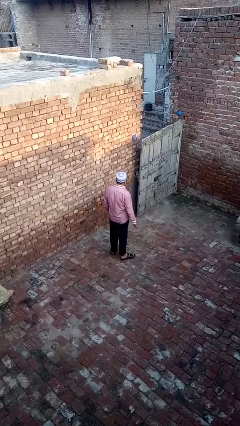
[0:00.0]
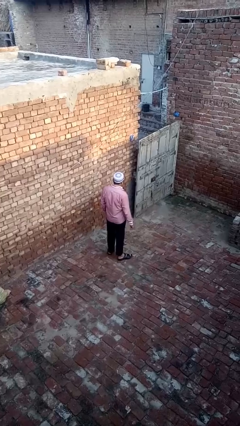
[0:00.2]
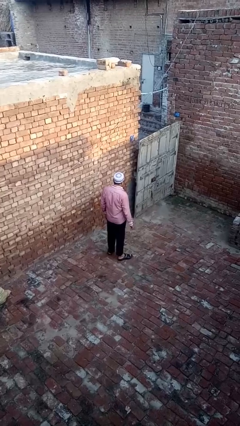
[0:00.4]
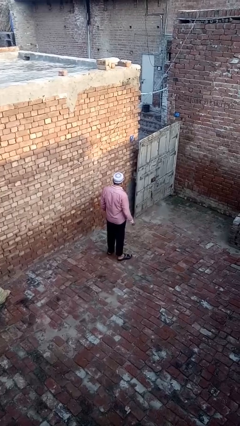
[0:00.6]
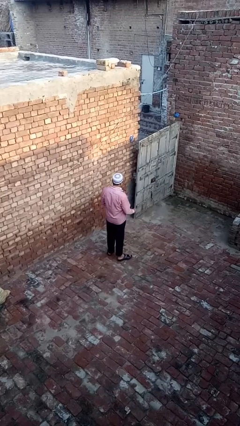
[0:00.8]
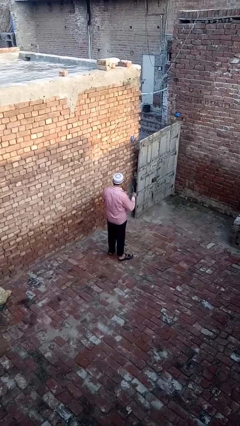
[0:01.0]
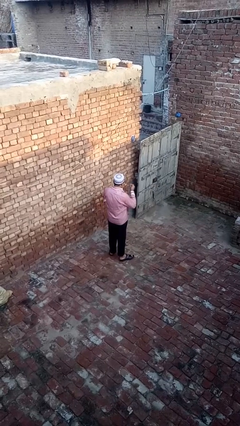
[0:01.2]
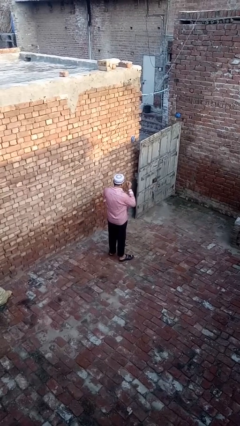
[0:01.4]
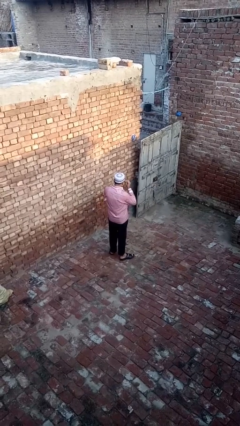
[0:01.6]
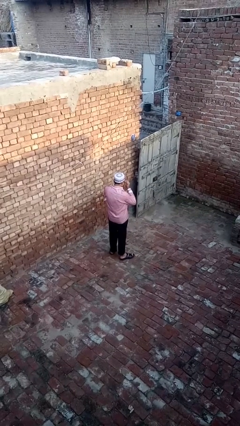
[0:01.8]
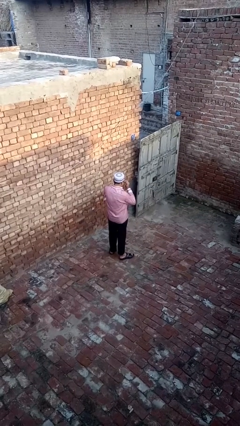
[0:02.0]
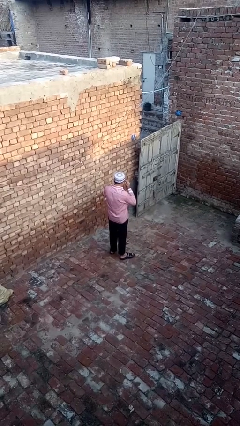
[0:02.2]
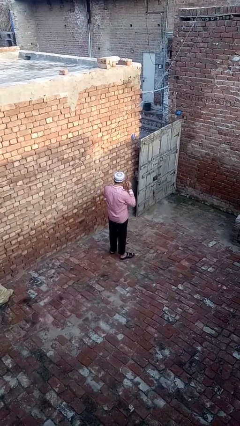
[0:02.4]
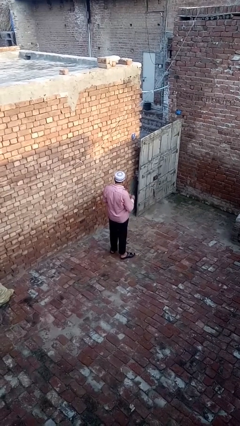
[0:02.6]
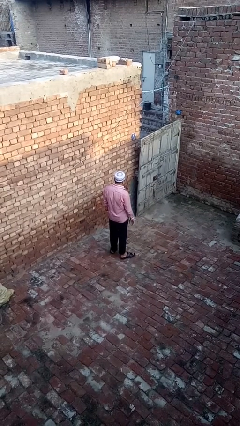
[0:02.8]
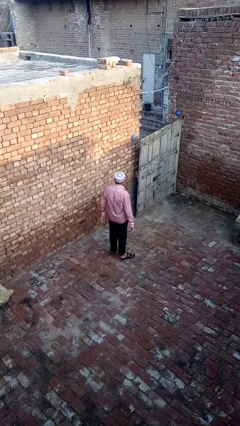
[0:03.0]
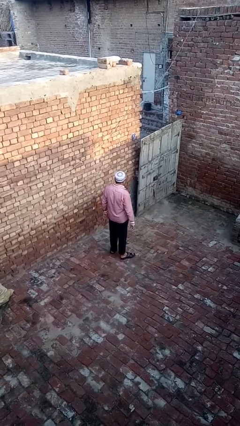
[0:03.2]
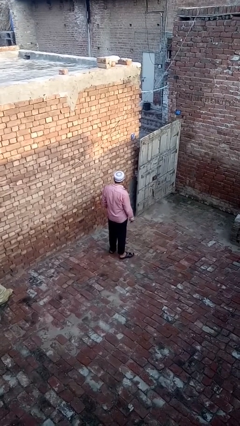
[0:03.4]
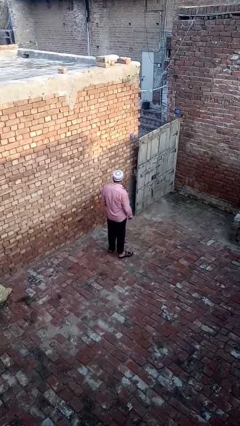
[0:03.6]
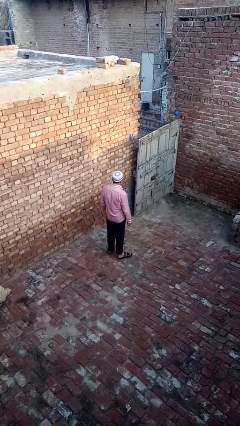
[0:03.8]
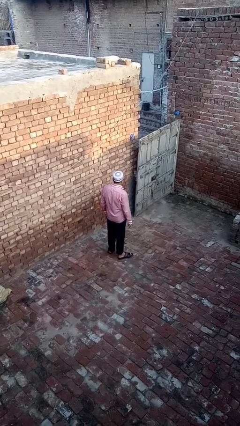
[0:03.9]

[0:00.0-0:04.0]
person puts on glasses

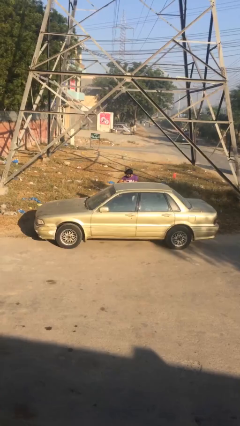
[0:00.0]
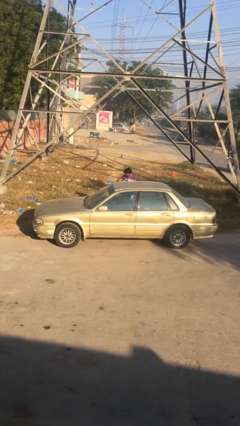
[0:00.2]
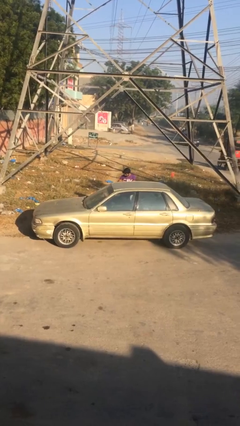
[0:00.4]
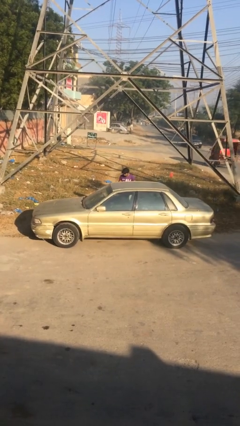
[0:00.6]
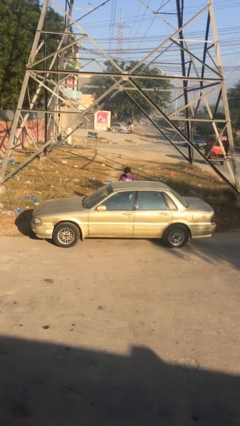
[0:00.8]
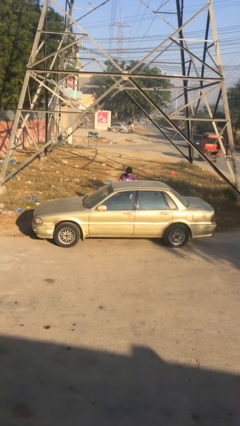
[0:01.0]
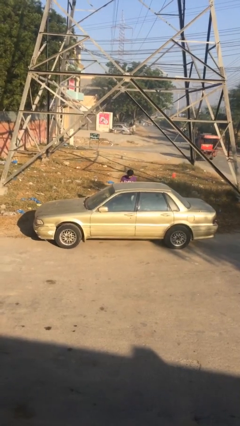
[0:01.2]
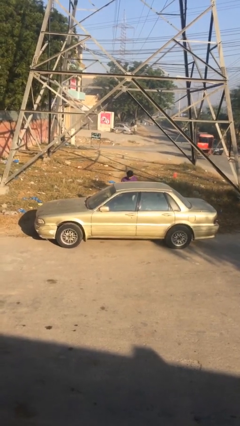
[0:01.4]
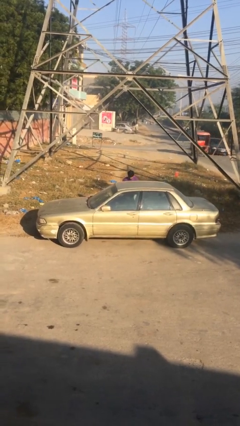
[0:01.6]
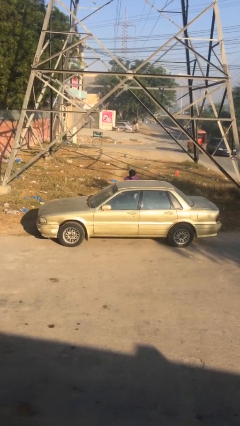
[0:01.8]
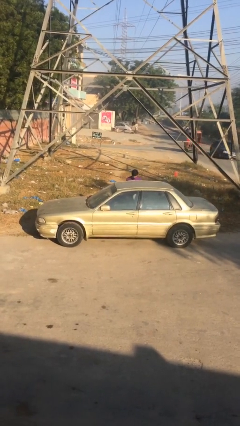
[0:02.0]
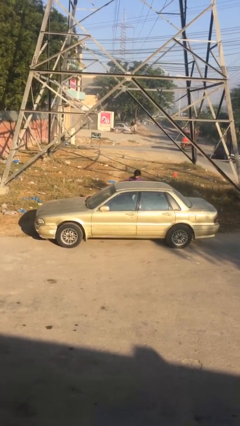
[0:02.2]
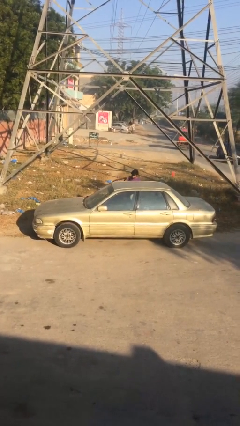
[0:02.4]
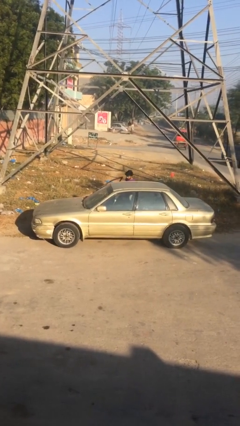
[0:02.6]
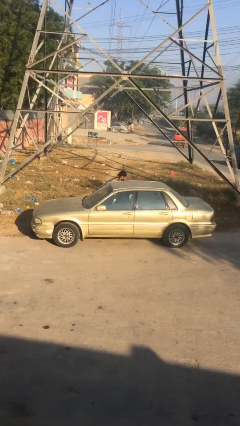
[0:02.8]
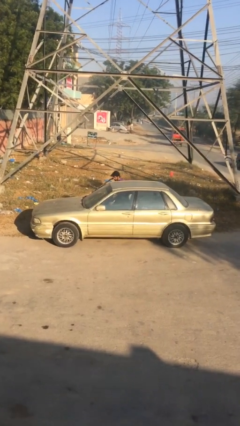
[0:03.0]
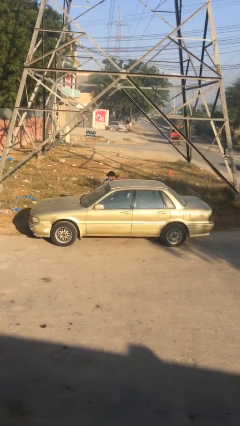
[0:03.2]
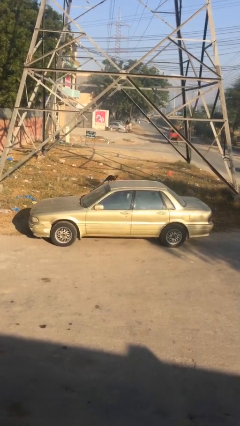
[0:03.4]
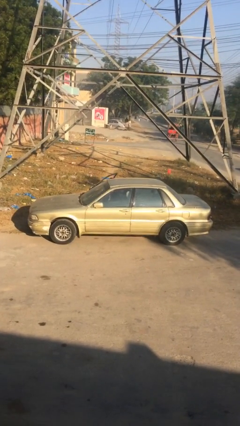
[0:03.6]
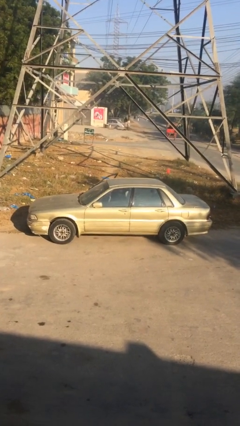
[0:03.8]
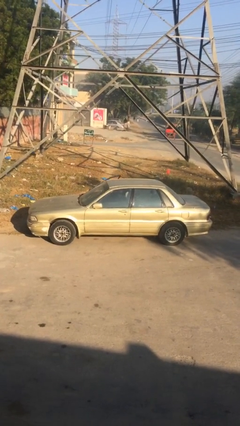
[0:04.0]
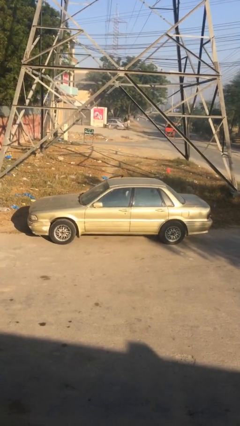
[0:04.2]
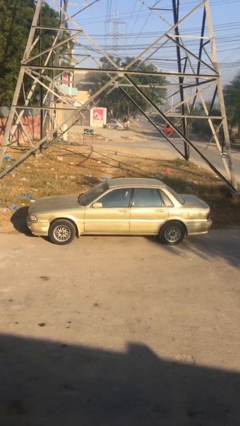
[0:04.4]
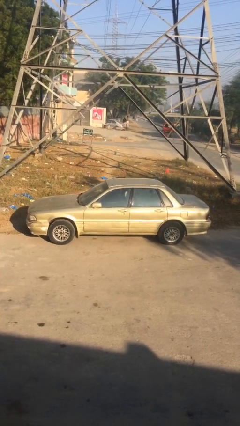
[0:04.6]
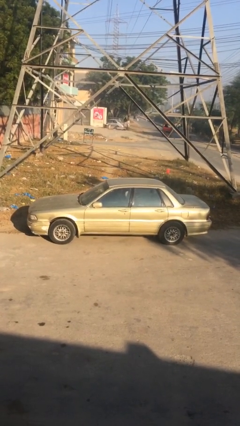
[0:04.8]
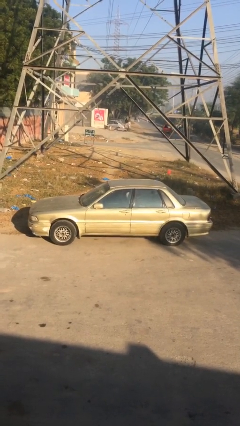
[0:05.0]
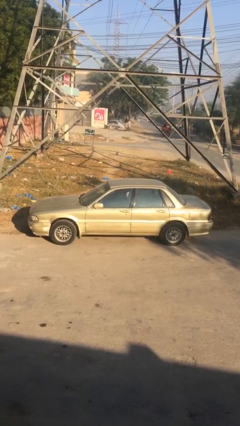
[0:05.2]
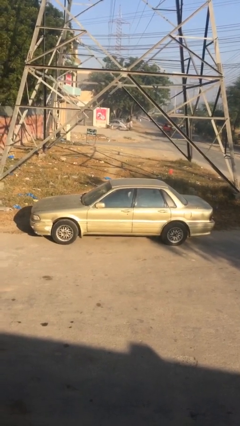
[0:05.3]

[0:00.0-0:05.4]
car picks up person

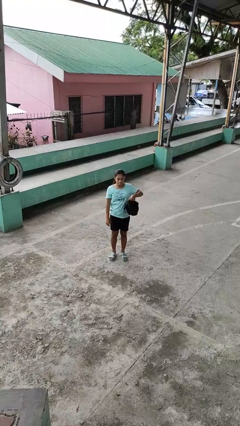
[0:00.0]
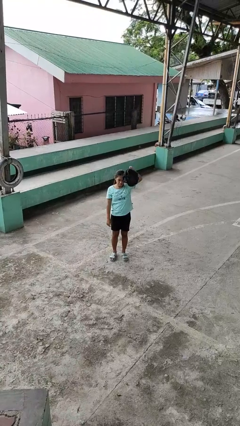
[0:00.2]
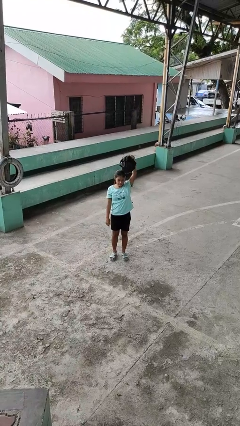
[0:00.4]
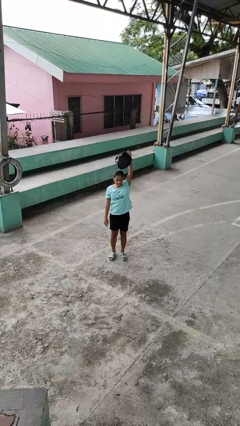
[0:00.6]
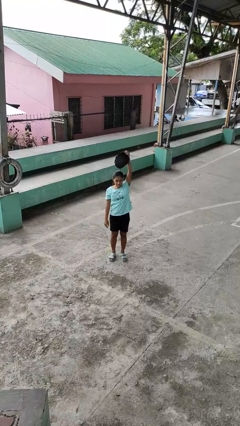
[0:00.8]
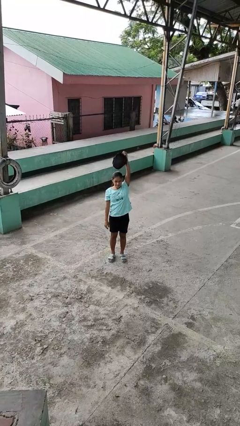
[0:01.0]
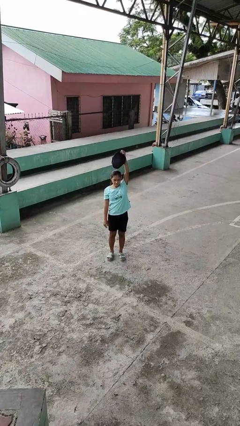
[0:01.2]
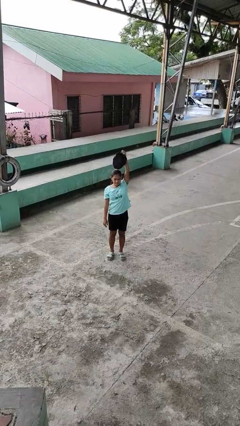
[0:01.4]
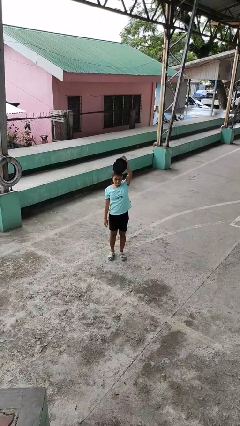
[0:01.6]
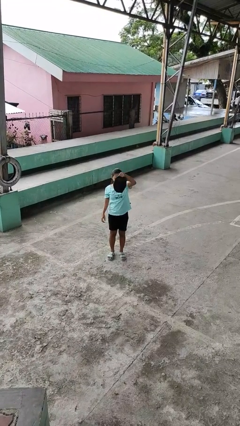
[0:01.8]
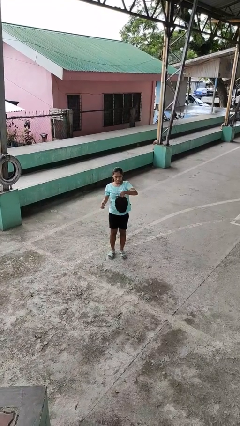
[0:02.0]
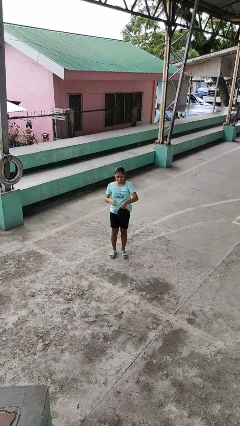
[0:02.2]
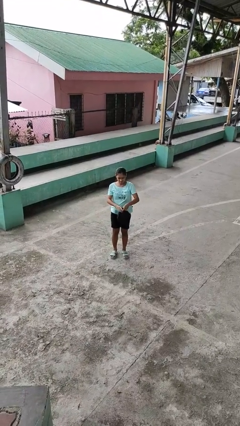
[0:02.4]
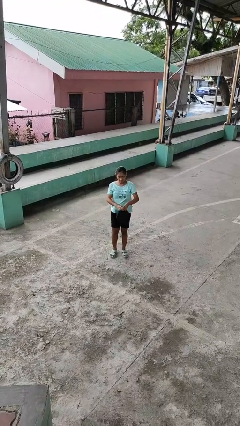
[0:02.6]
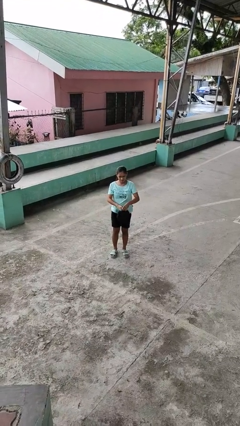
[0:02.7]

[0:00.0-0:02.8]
person holds object above head

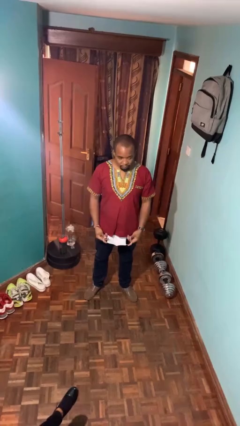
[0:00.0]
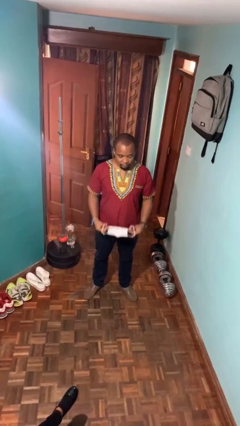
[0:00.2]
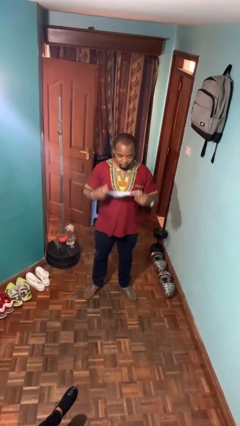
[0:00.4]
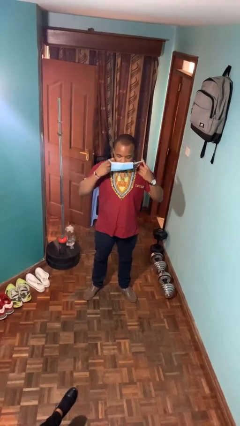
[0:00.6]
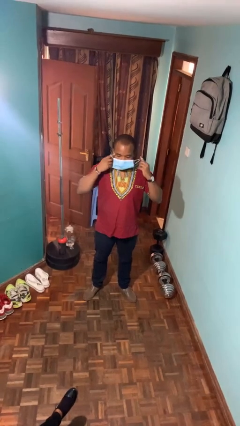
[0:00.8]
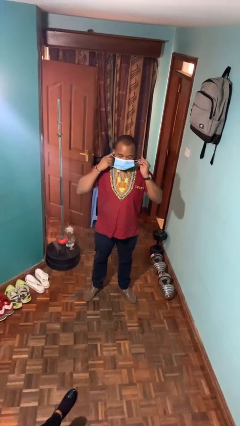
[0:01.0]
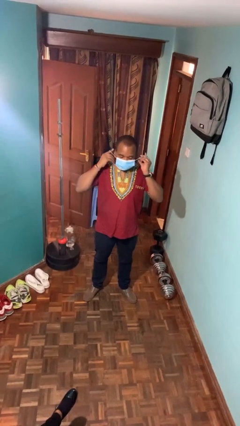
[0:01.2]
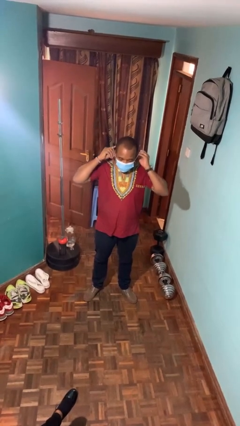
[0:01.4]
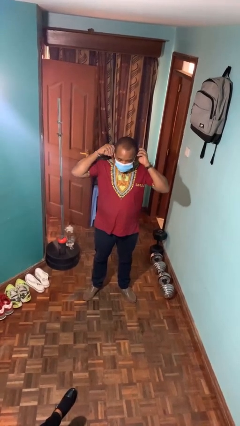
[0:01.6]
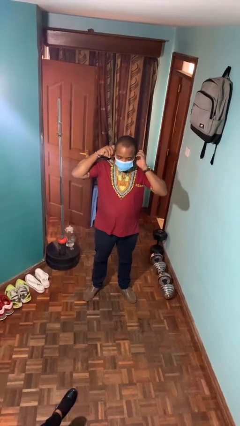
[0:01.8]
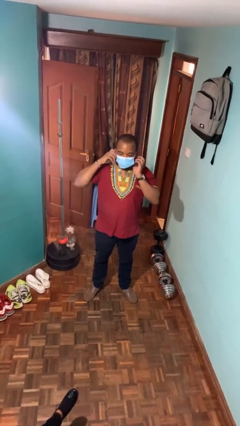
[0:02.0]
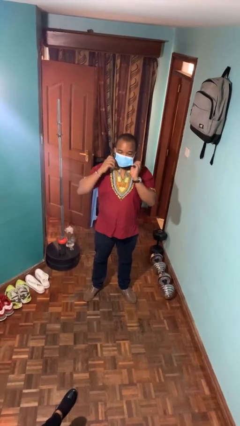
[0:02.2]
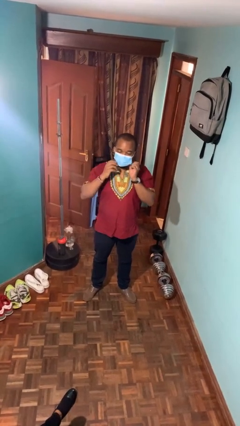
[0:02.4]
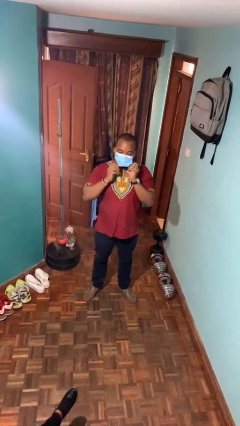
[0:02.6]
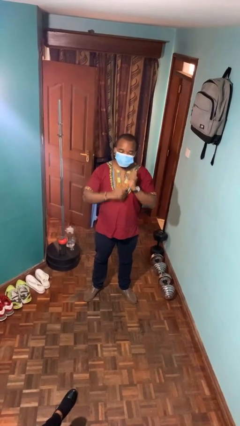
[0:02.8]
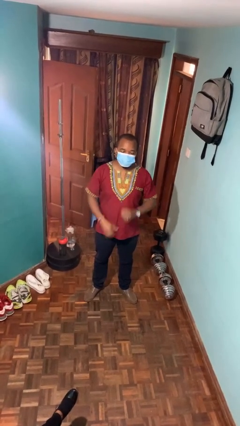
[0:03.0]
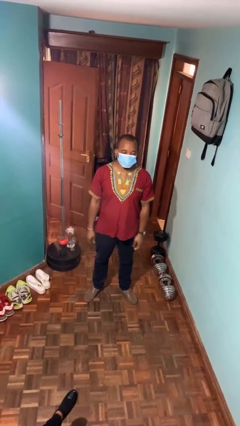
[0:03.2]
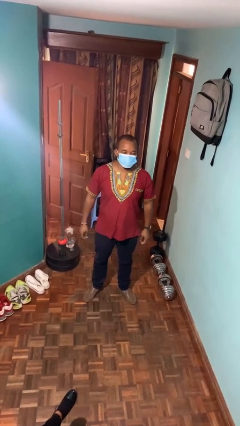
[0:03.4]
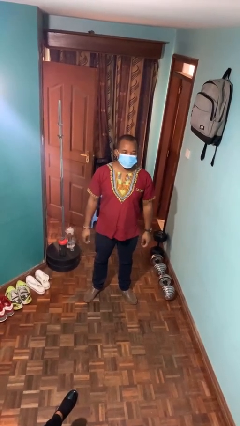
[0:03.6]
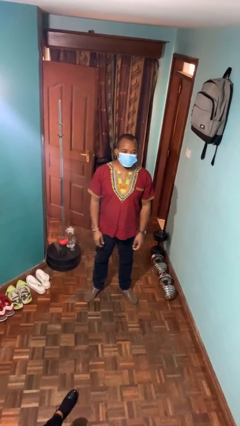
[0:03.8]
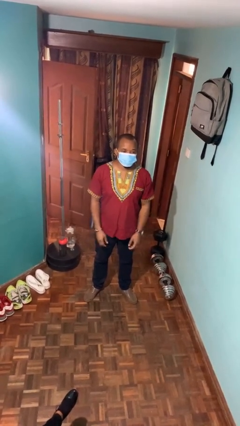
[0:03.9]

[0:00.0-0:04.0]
person puts on facemask

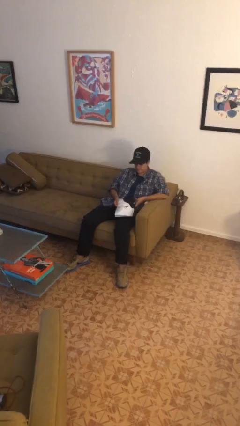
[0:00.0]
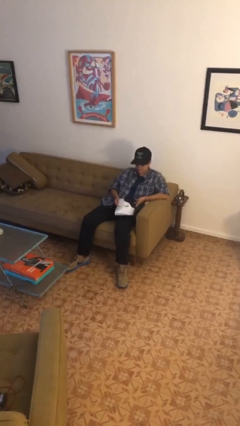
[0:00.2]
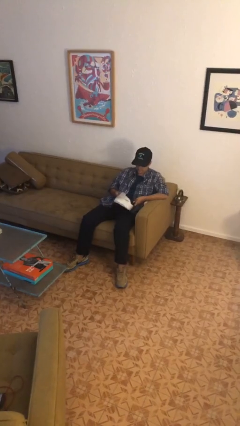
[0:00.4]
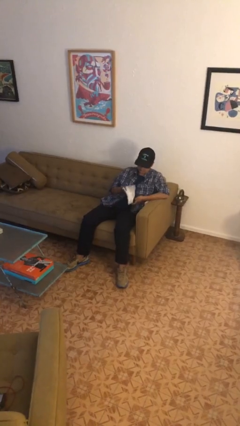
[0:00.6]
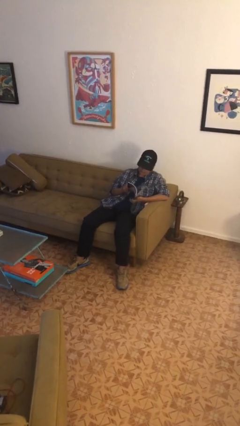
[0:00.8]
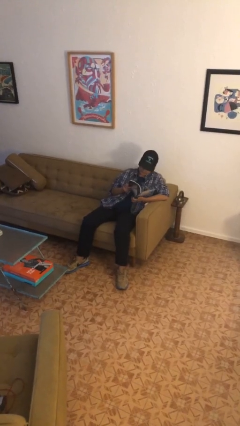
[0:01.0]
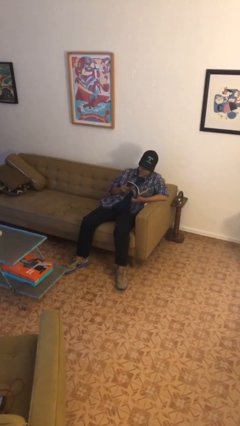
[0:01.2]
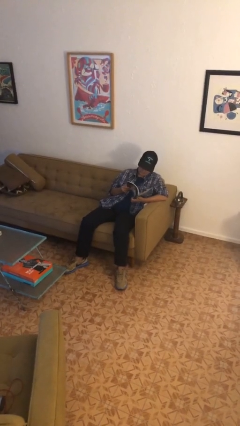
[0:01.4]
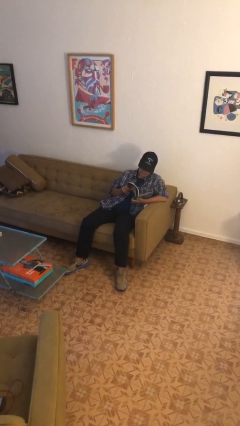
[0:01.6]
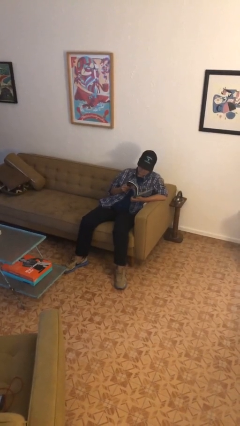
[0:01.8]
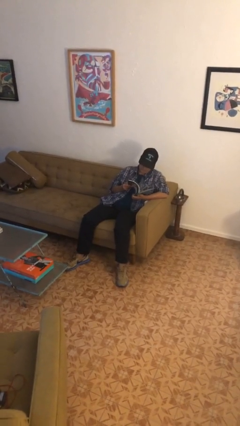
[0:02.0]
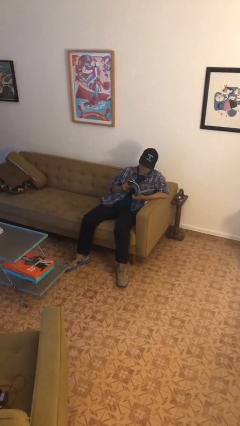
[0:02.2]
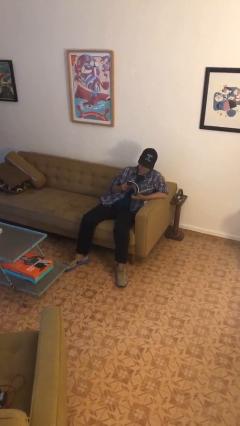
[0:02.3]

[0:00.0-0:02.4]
person reads magazine
